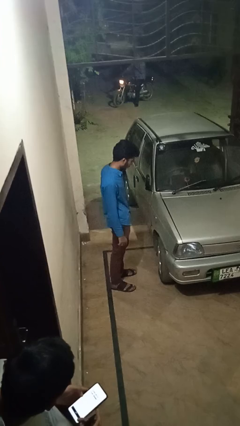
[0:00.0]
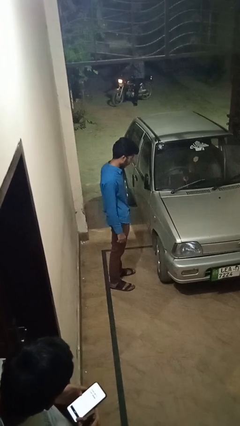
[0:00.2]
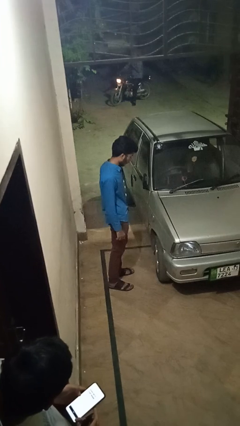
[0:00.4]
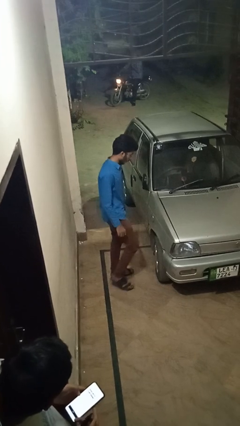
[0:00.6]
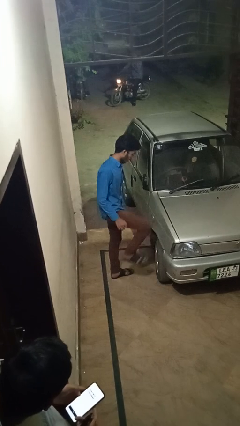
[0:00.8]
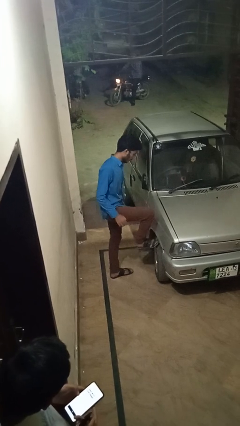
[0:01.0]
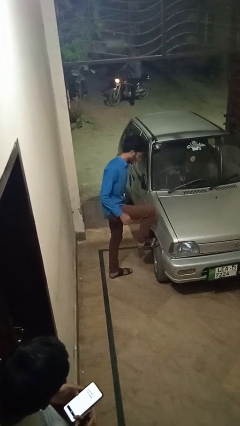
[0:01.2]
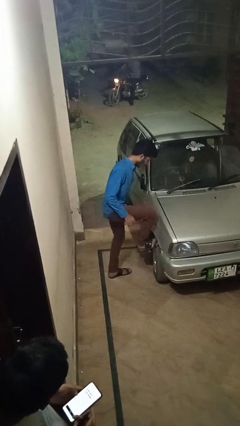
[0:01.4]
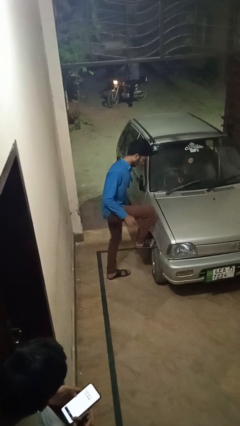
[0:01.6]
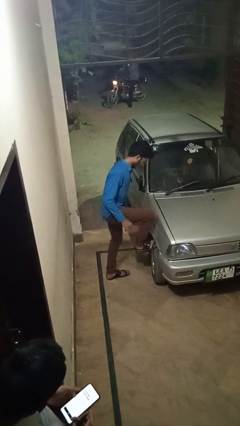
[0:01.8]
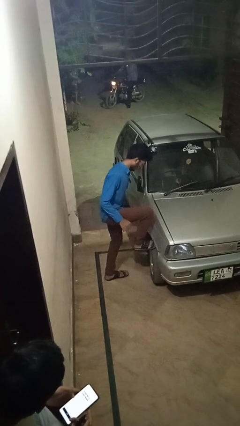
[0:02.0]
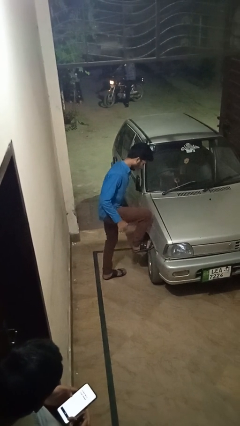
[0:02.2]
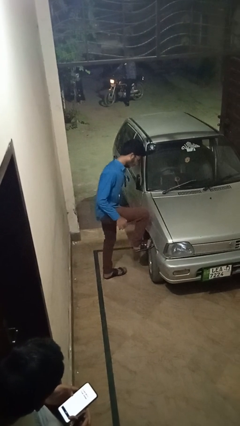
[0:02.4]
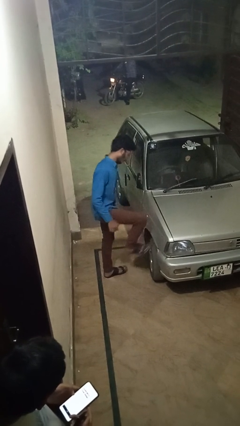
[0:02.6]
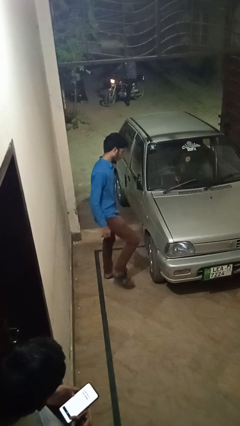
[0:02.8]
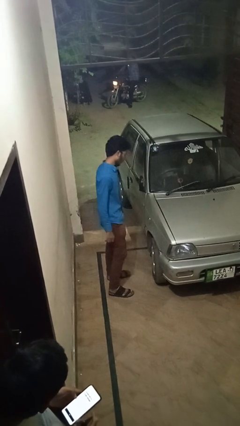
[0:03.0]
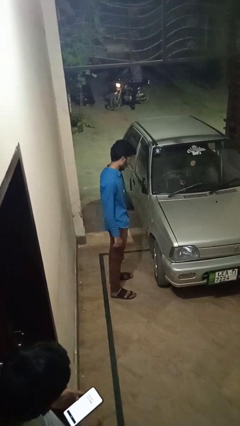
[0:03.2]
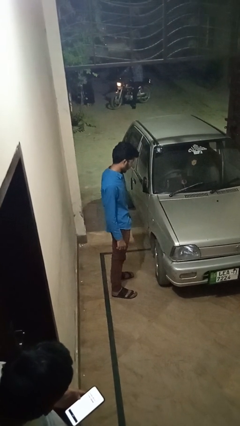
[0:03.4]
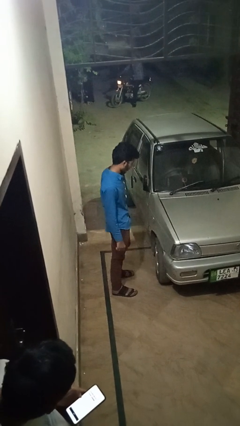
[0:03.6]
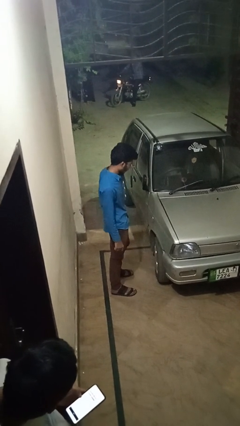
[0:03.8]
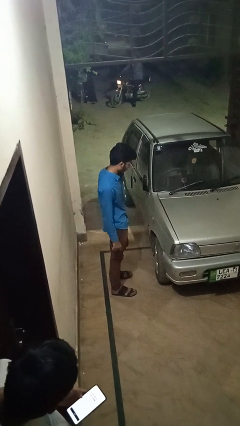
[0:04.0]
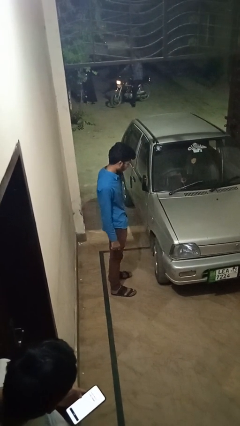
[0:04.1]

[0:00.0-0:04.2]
person kicks car tires

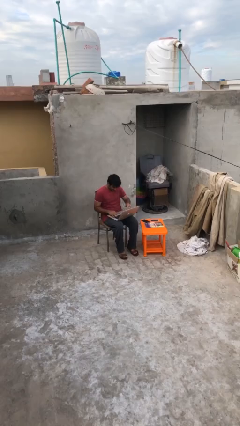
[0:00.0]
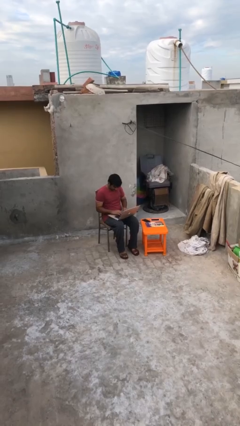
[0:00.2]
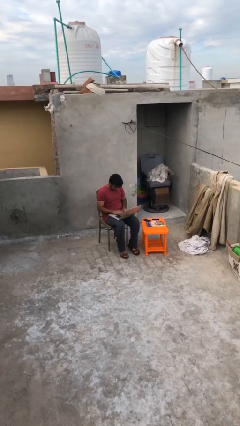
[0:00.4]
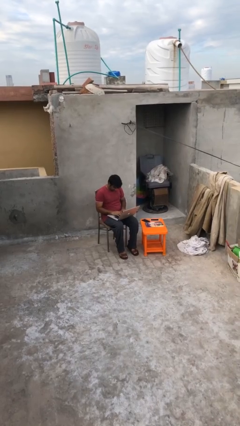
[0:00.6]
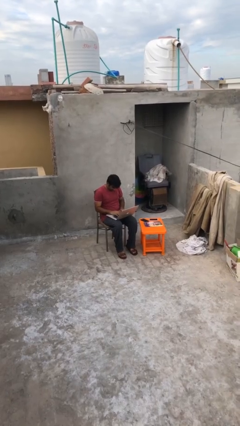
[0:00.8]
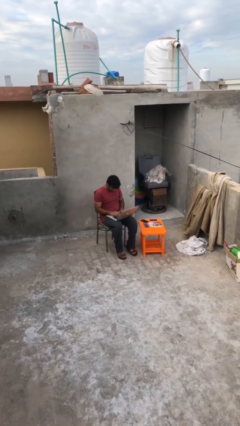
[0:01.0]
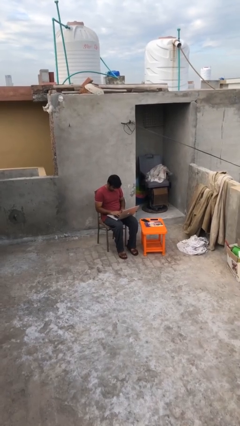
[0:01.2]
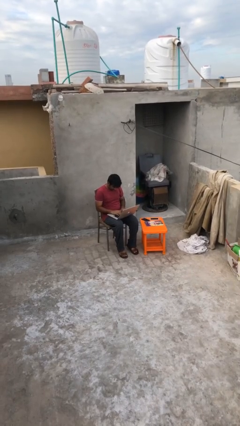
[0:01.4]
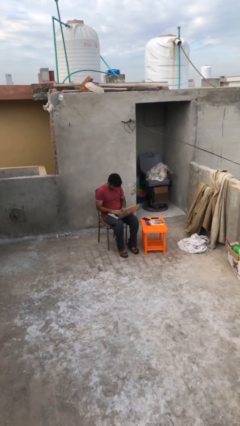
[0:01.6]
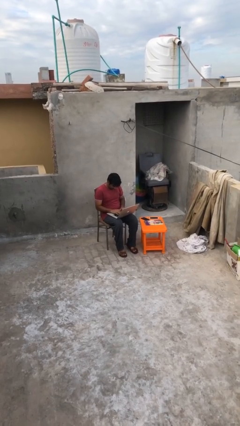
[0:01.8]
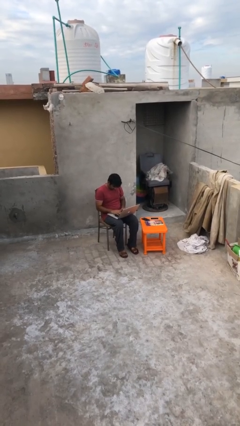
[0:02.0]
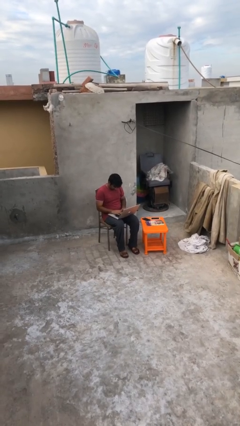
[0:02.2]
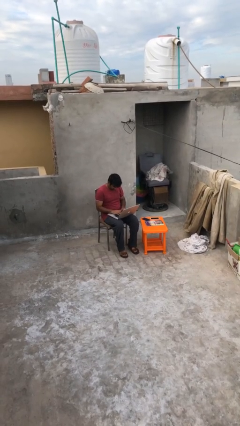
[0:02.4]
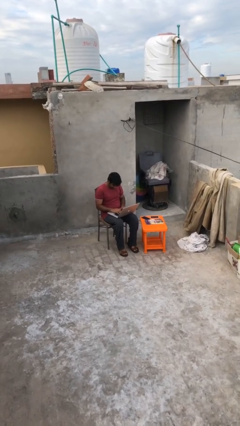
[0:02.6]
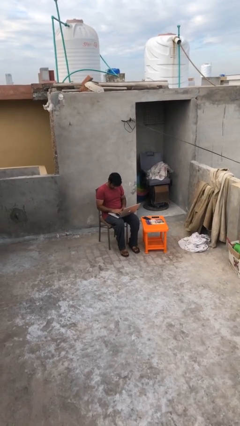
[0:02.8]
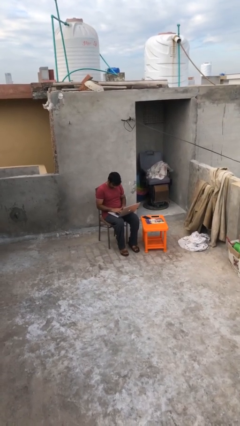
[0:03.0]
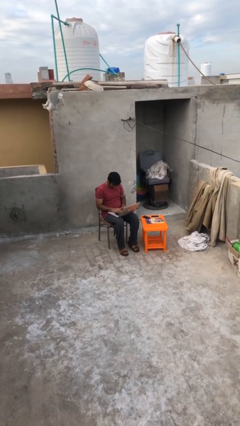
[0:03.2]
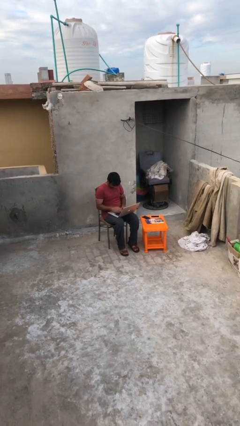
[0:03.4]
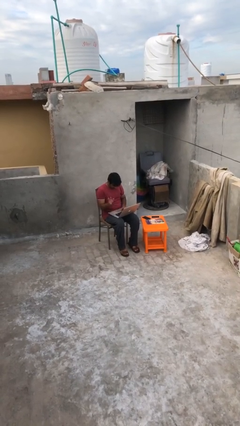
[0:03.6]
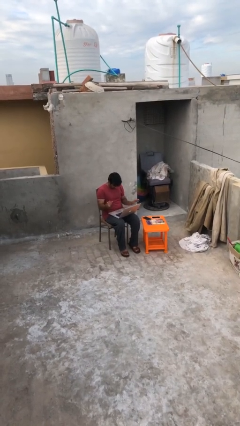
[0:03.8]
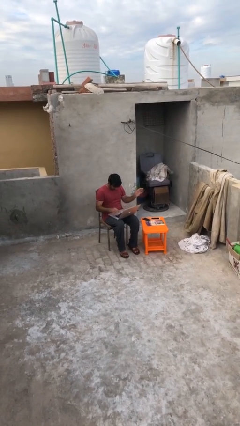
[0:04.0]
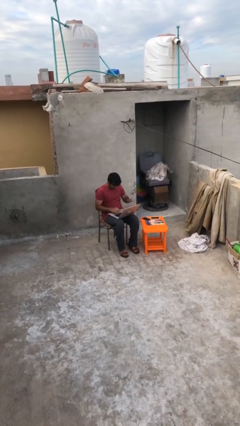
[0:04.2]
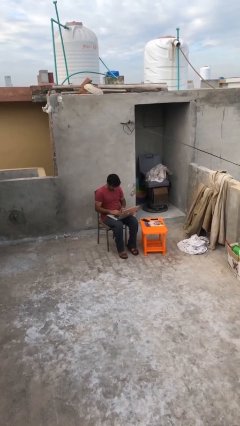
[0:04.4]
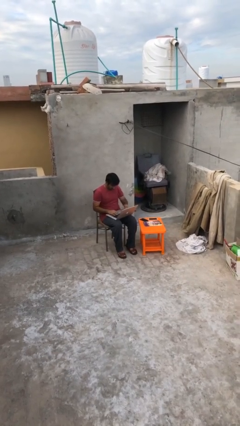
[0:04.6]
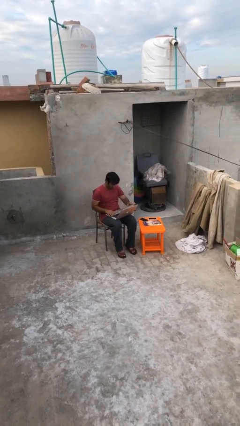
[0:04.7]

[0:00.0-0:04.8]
person interacts with laptop

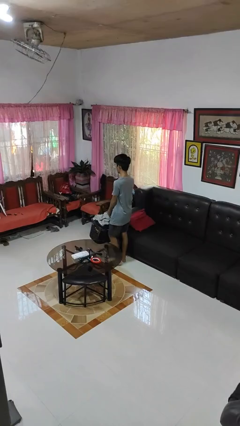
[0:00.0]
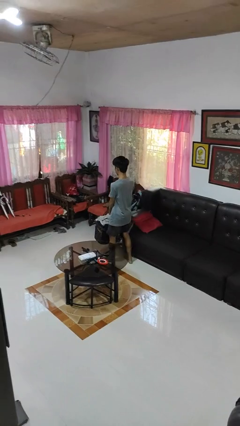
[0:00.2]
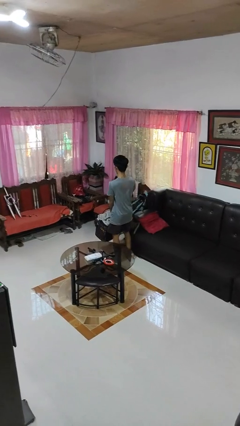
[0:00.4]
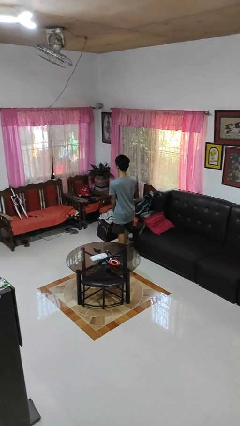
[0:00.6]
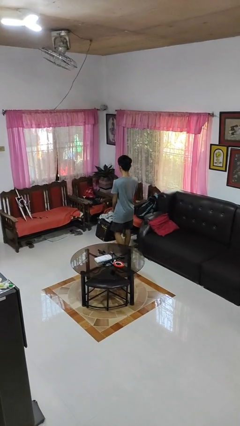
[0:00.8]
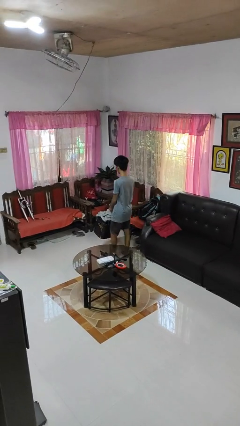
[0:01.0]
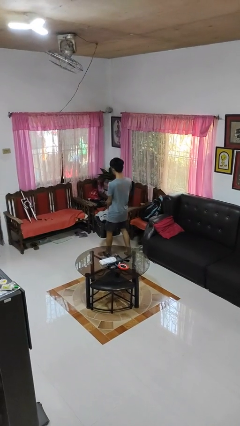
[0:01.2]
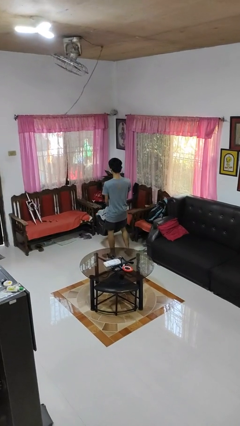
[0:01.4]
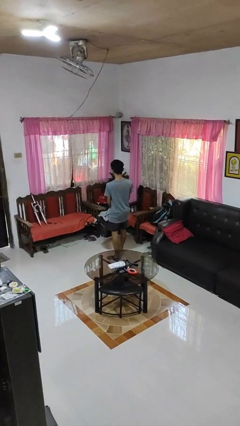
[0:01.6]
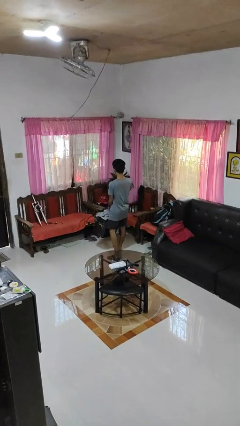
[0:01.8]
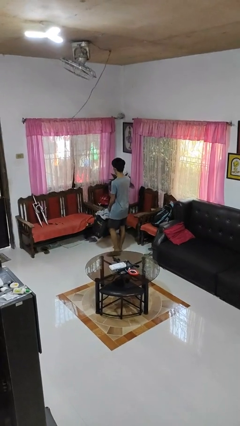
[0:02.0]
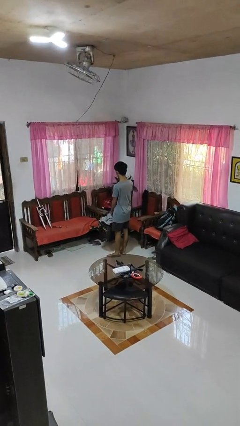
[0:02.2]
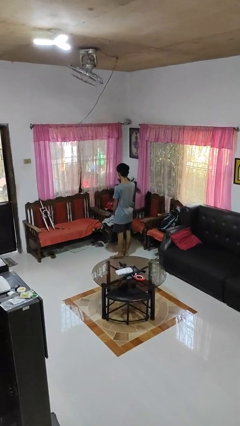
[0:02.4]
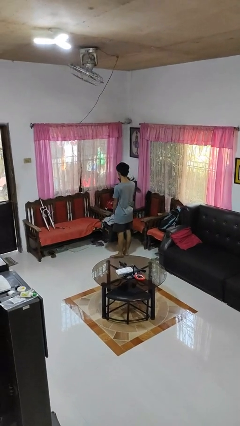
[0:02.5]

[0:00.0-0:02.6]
person carries laundry basket

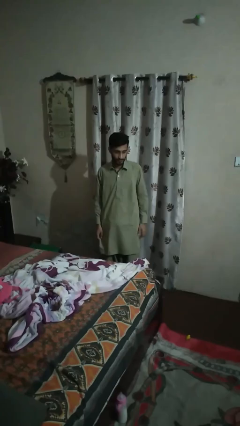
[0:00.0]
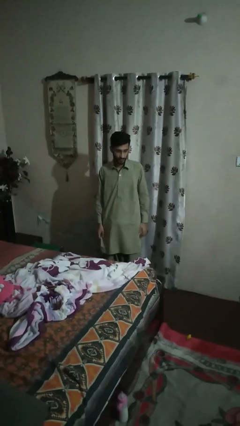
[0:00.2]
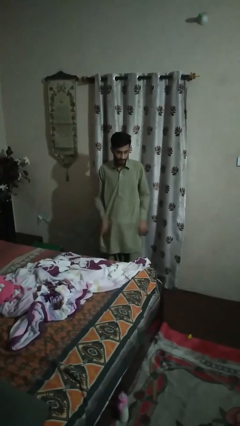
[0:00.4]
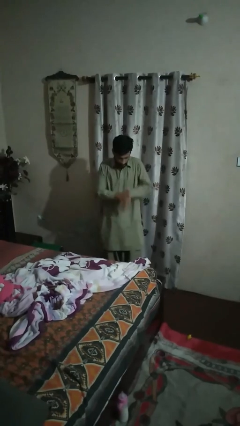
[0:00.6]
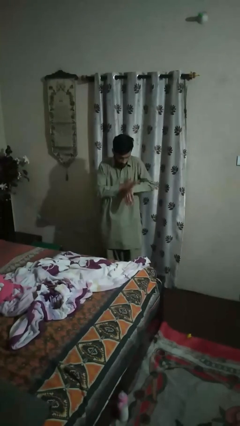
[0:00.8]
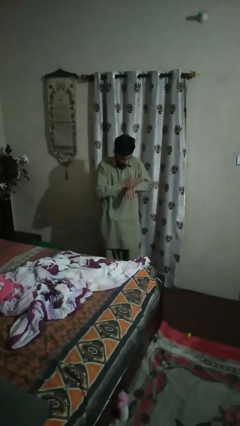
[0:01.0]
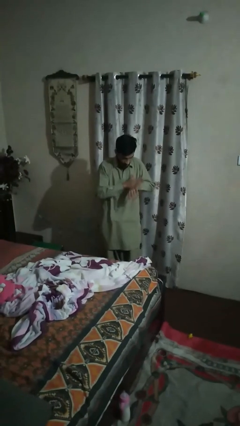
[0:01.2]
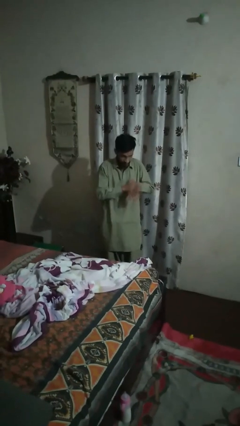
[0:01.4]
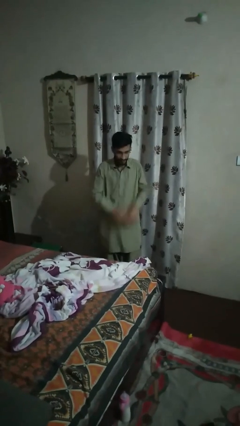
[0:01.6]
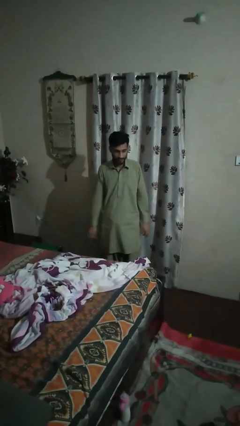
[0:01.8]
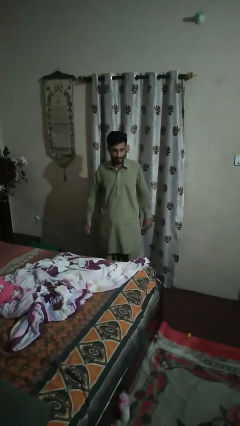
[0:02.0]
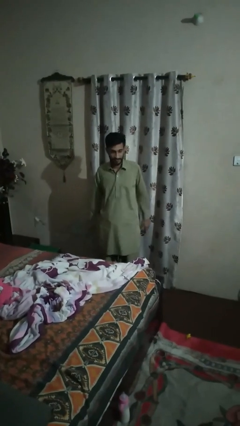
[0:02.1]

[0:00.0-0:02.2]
person swats bug

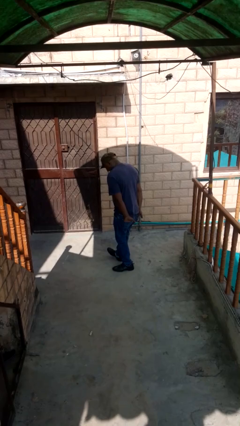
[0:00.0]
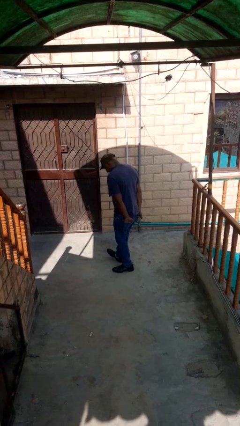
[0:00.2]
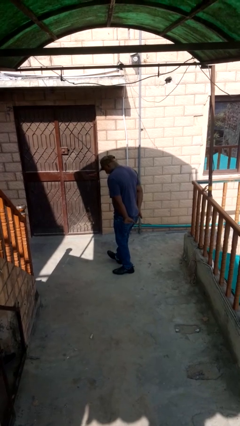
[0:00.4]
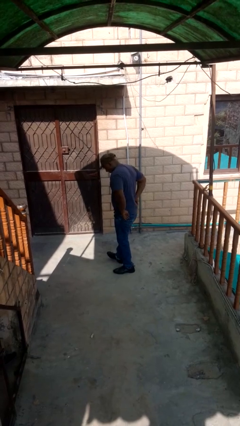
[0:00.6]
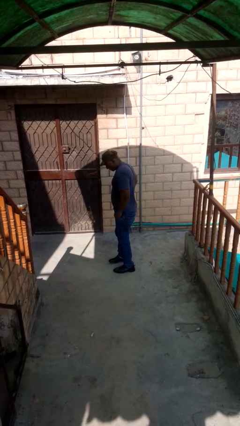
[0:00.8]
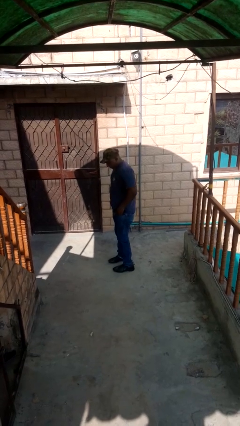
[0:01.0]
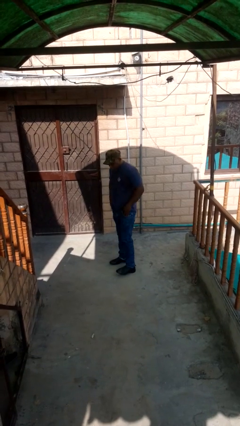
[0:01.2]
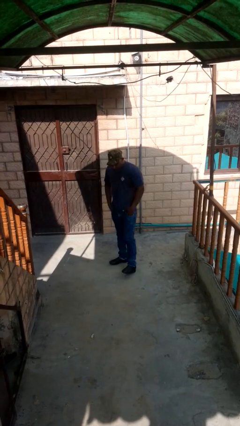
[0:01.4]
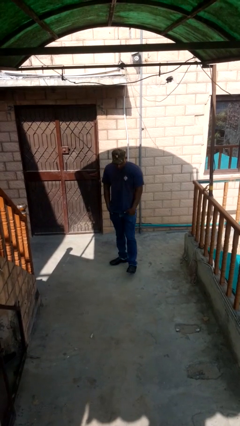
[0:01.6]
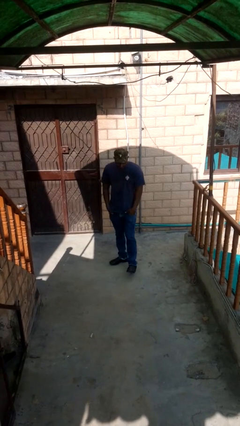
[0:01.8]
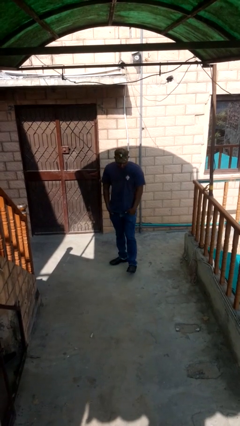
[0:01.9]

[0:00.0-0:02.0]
person puts hands in back pockets

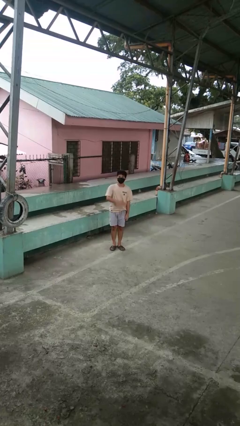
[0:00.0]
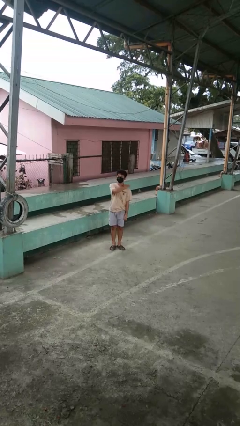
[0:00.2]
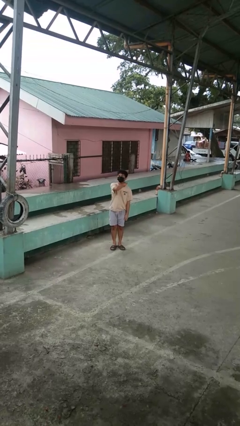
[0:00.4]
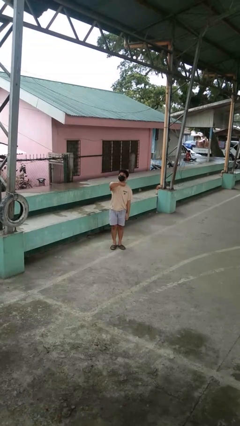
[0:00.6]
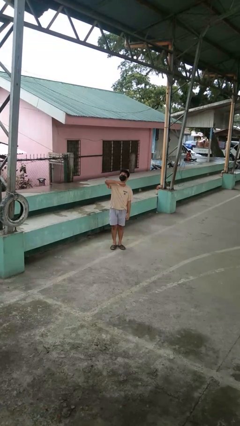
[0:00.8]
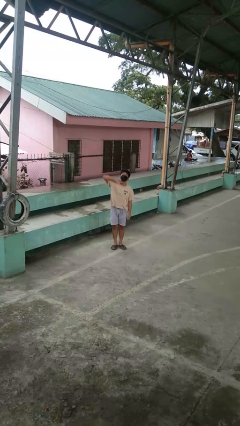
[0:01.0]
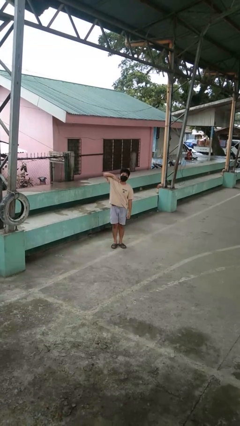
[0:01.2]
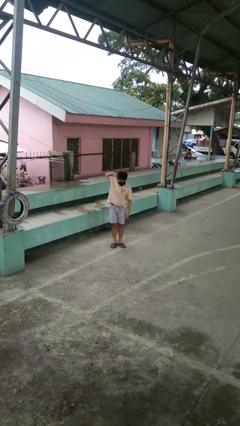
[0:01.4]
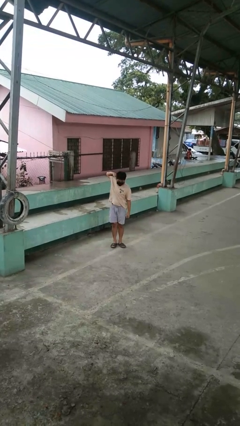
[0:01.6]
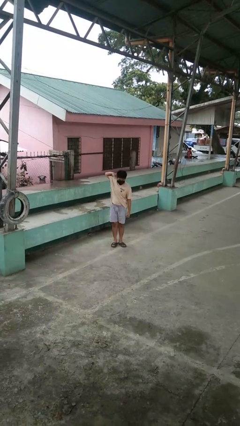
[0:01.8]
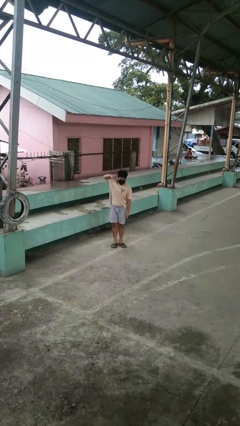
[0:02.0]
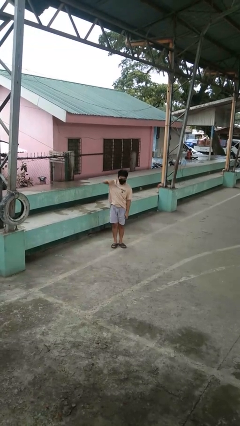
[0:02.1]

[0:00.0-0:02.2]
person gestures cut
